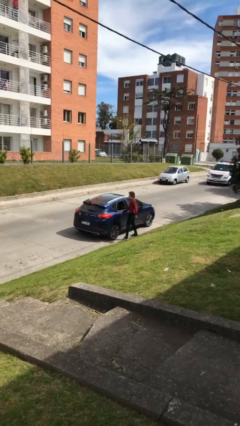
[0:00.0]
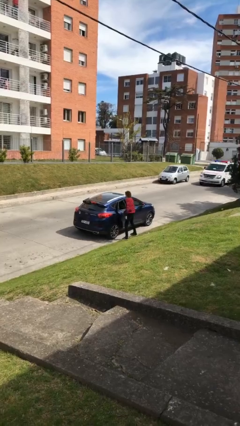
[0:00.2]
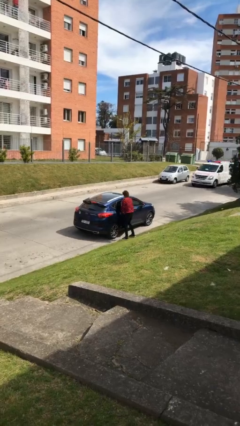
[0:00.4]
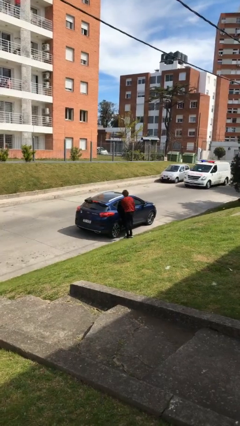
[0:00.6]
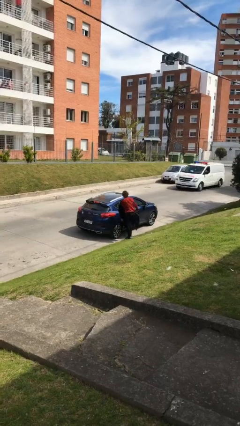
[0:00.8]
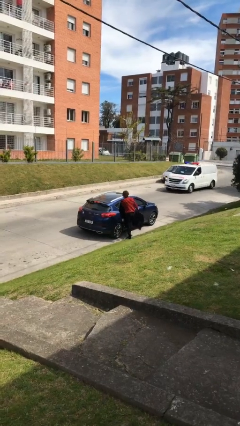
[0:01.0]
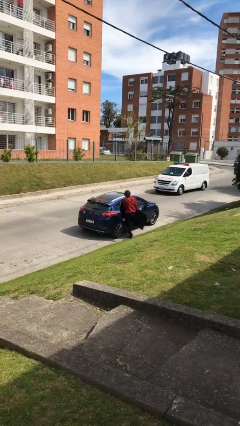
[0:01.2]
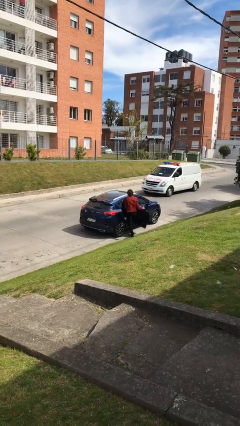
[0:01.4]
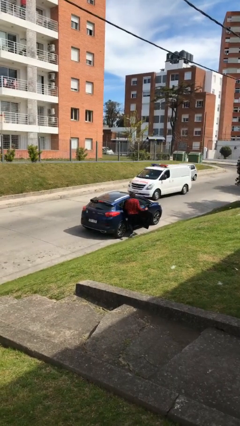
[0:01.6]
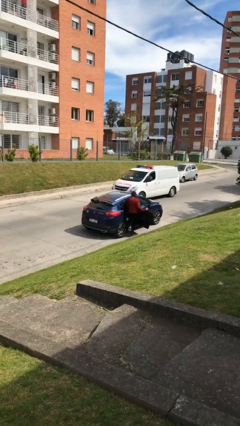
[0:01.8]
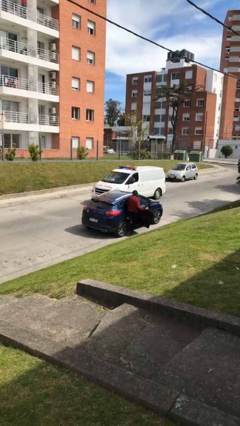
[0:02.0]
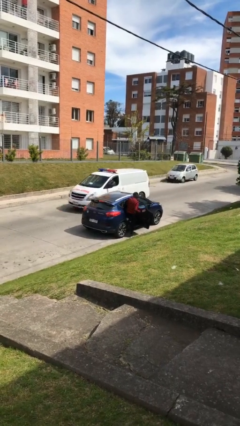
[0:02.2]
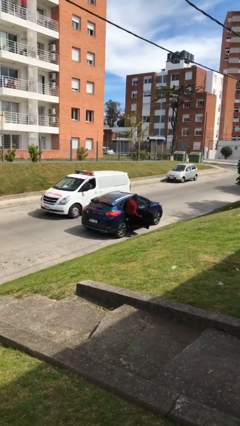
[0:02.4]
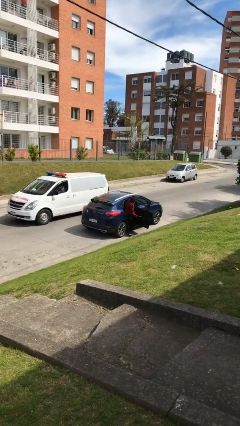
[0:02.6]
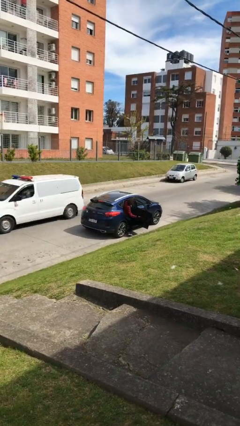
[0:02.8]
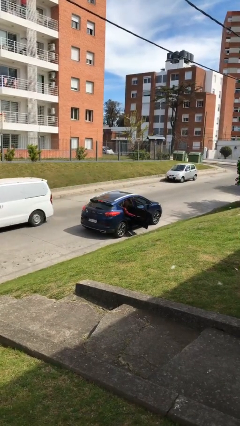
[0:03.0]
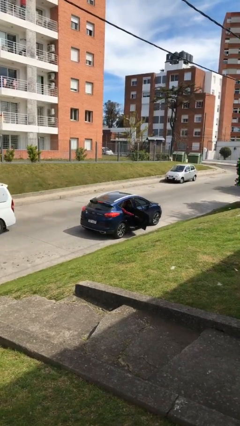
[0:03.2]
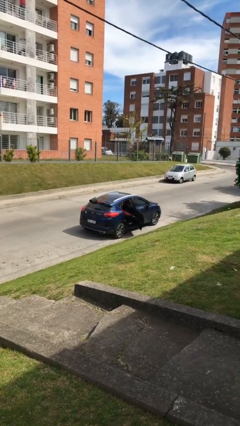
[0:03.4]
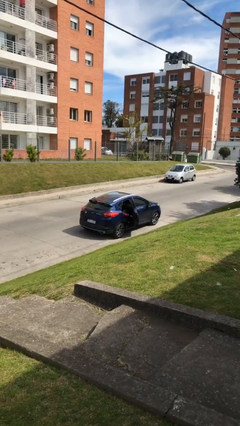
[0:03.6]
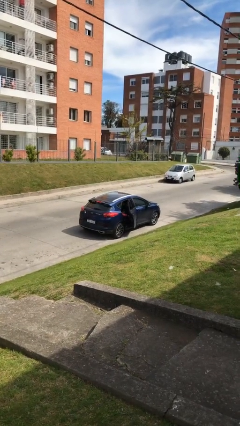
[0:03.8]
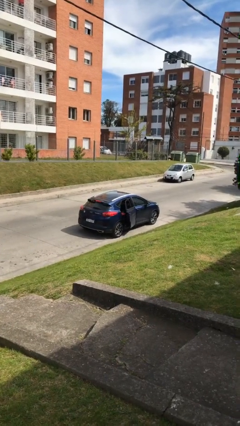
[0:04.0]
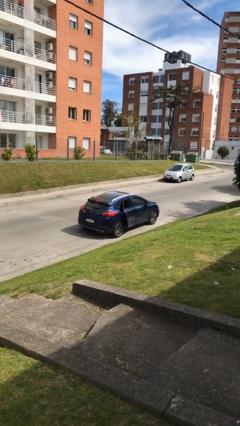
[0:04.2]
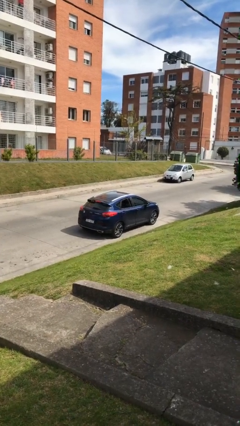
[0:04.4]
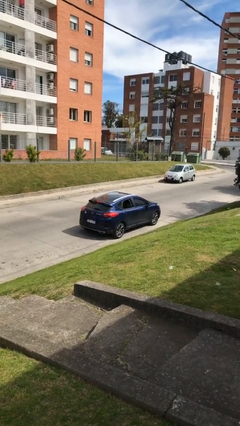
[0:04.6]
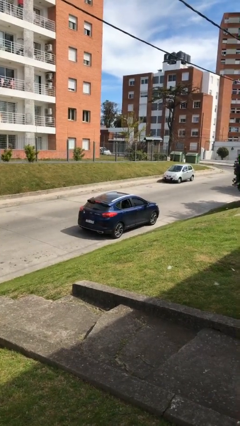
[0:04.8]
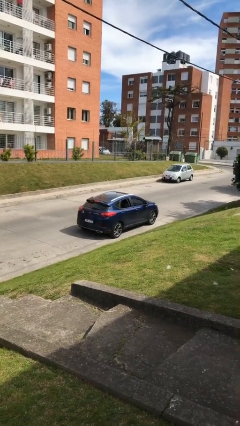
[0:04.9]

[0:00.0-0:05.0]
car picks up person

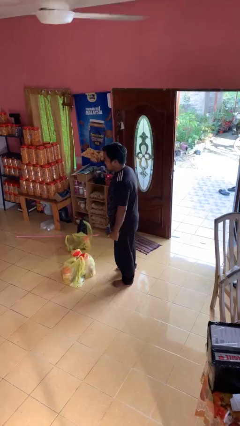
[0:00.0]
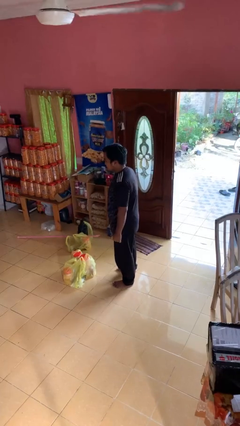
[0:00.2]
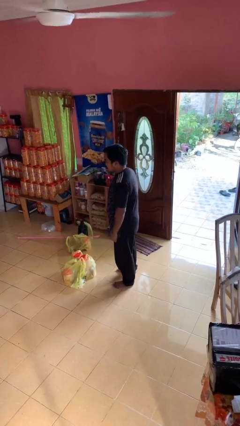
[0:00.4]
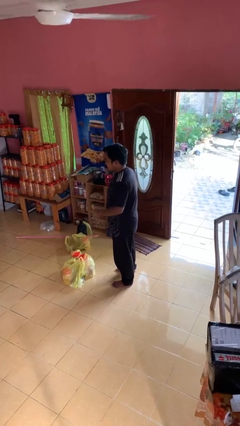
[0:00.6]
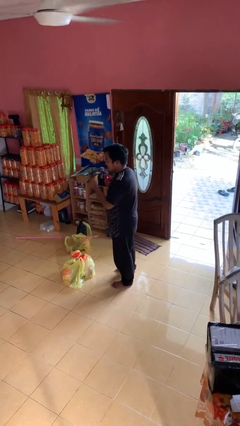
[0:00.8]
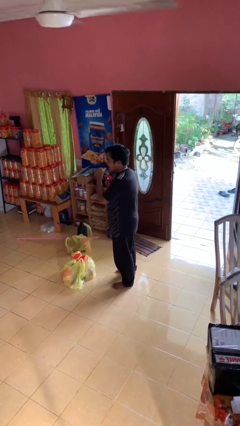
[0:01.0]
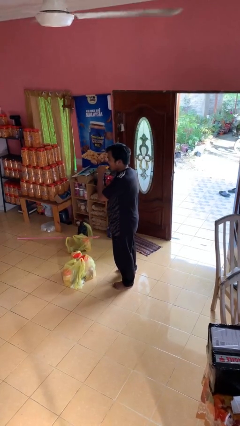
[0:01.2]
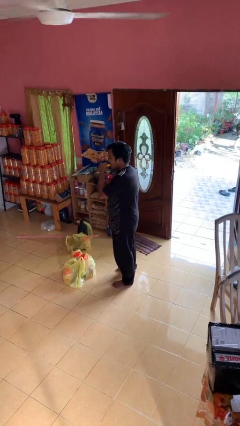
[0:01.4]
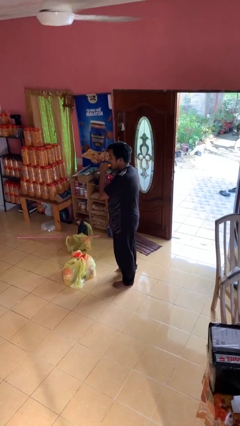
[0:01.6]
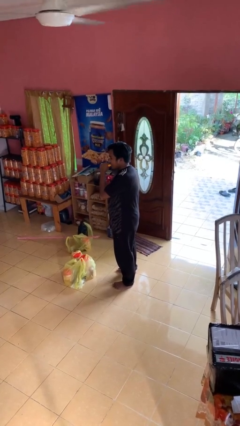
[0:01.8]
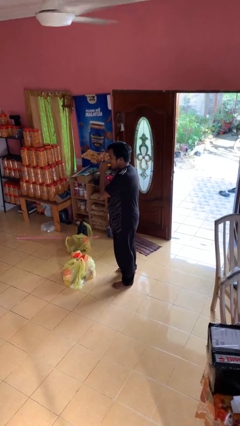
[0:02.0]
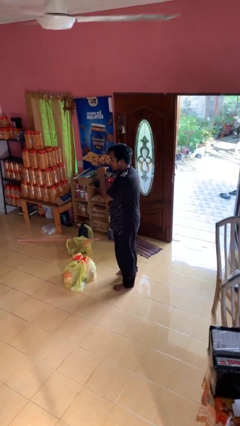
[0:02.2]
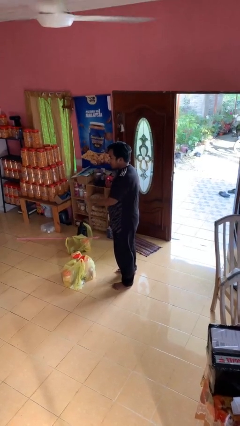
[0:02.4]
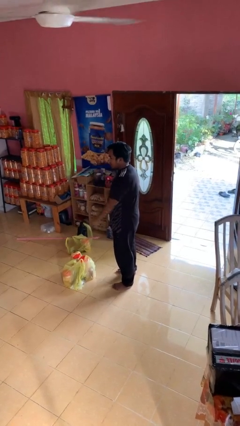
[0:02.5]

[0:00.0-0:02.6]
person eats banana

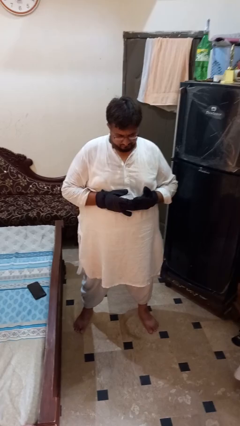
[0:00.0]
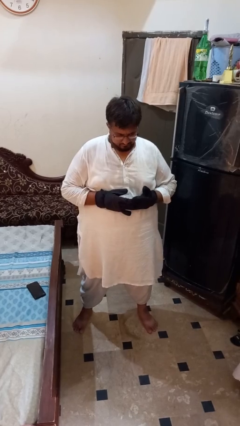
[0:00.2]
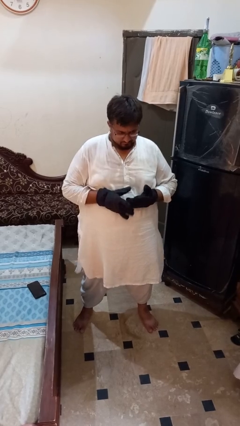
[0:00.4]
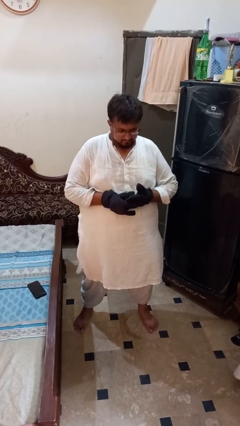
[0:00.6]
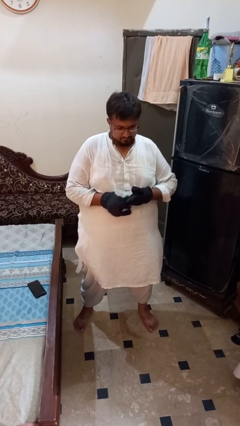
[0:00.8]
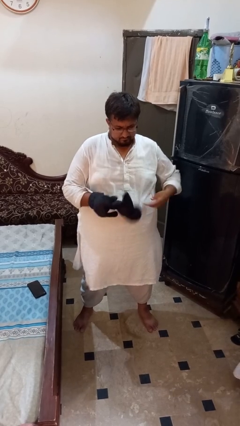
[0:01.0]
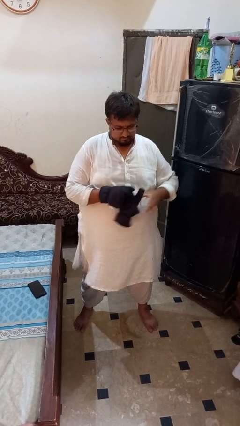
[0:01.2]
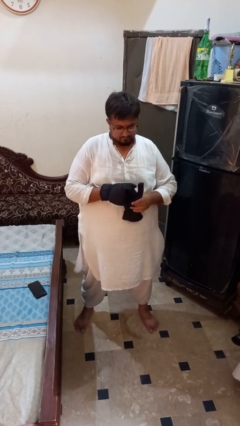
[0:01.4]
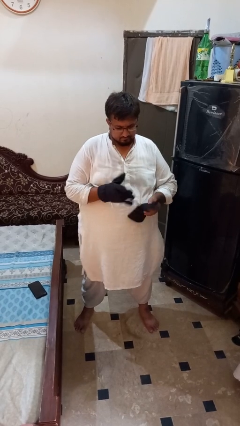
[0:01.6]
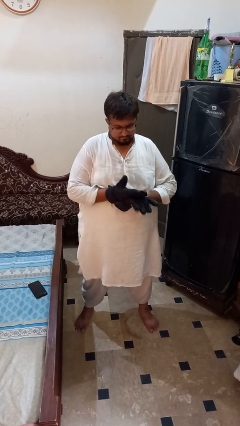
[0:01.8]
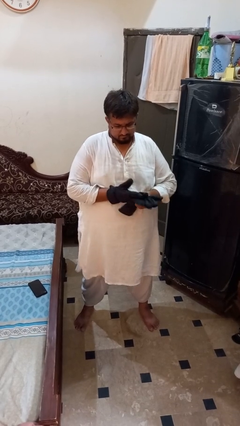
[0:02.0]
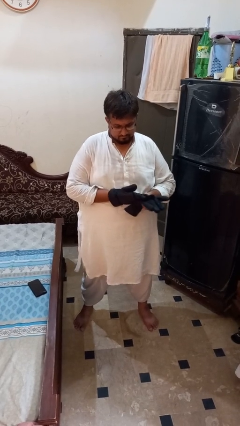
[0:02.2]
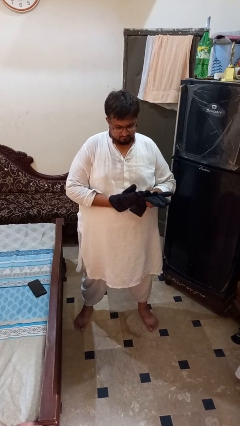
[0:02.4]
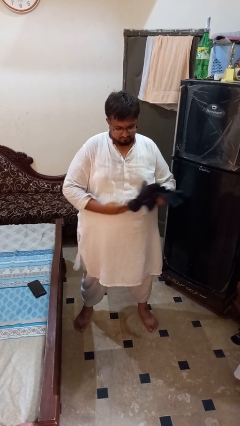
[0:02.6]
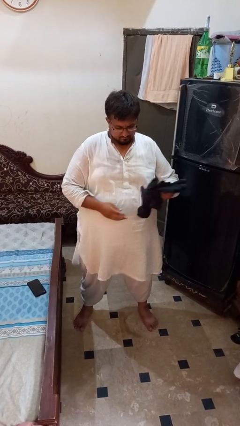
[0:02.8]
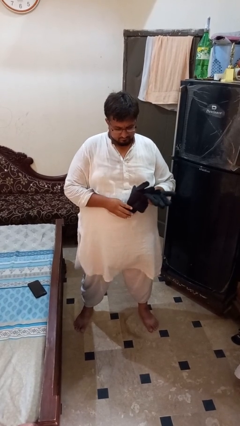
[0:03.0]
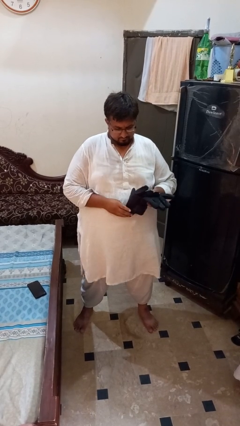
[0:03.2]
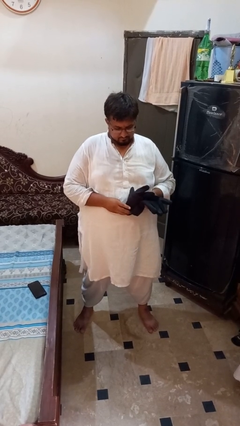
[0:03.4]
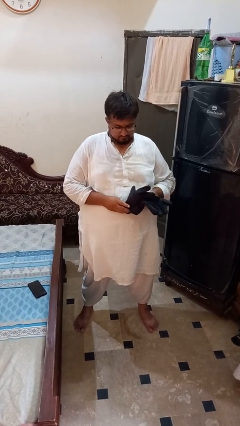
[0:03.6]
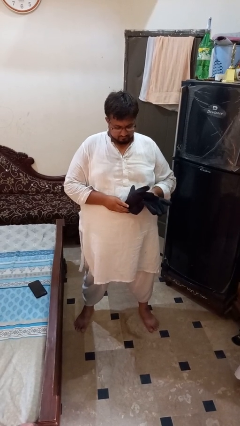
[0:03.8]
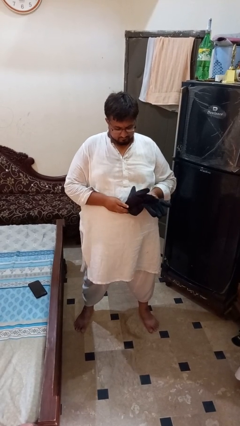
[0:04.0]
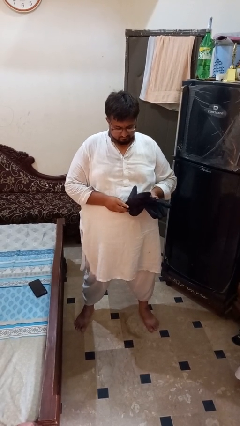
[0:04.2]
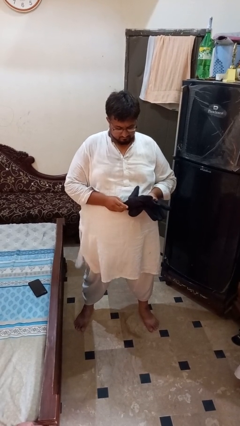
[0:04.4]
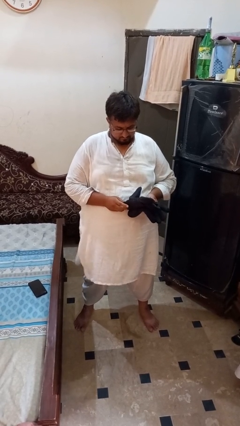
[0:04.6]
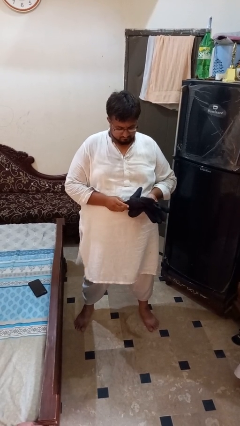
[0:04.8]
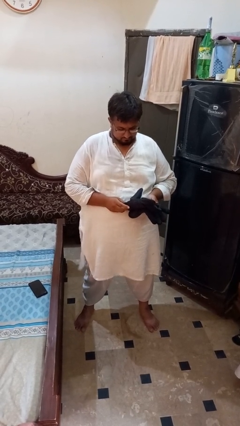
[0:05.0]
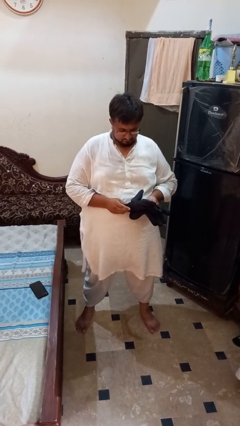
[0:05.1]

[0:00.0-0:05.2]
person takes off gloves

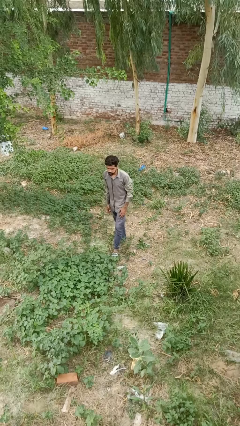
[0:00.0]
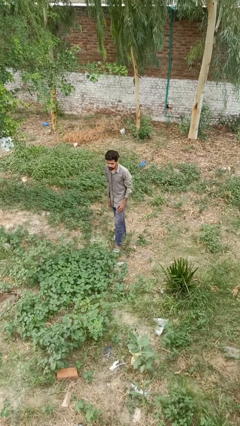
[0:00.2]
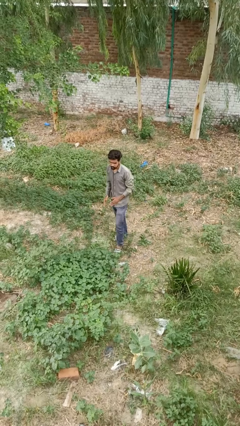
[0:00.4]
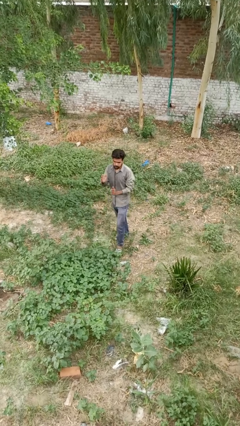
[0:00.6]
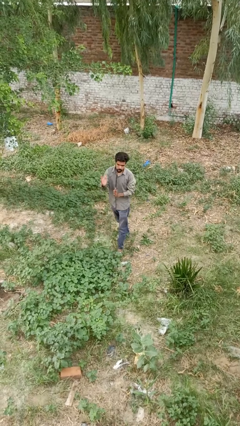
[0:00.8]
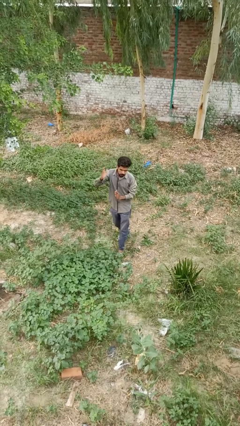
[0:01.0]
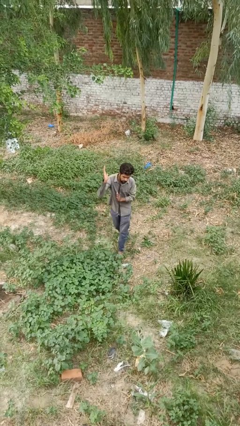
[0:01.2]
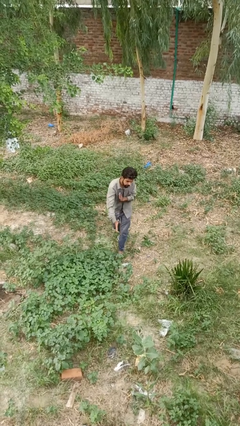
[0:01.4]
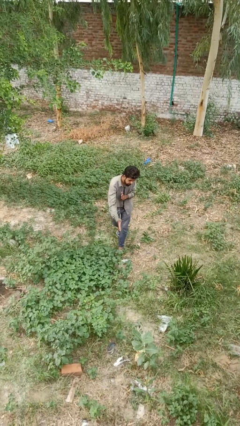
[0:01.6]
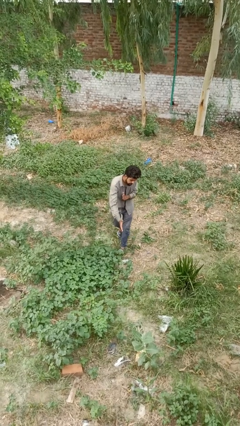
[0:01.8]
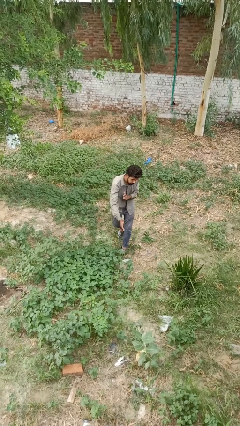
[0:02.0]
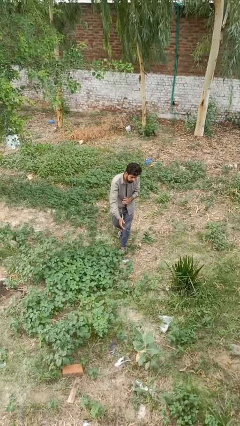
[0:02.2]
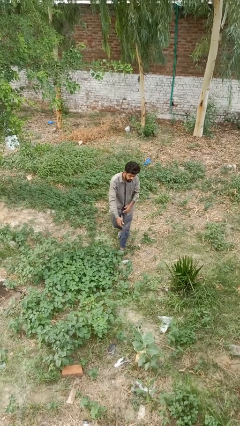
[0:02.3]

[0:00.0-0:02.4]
person karate chop

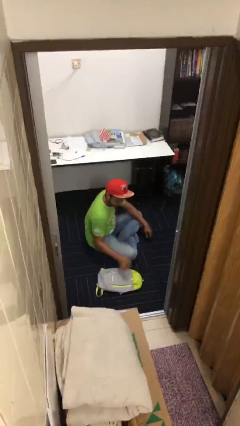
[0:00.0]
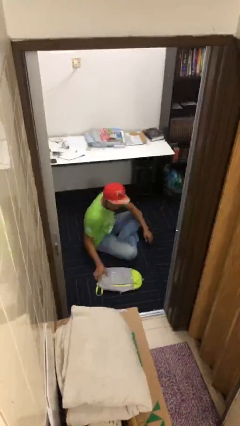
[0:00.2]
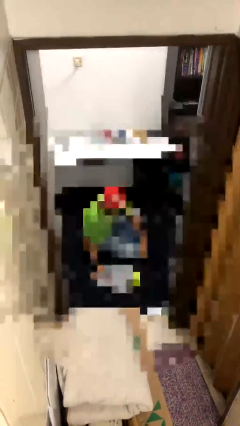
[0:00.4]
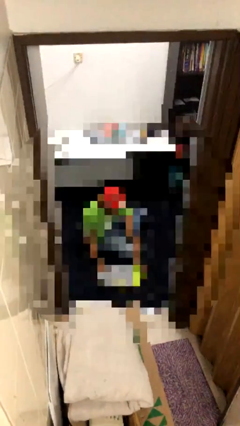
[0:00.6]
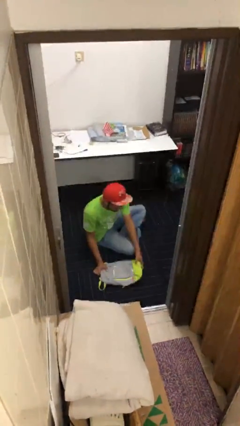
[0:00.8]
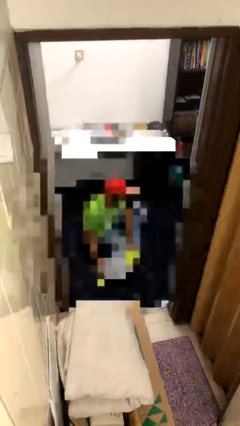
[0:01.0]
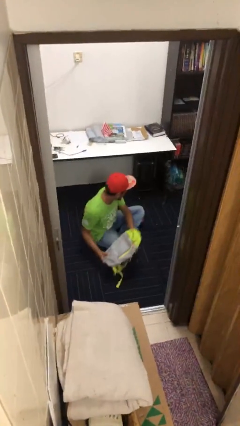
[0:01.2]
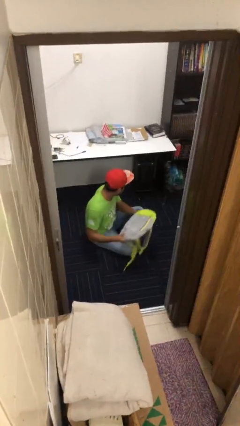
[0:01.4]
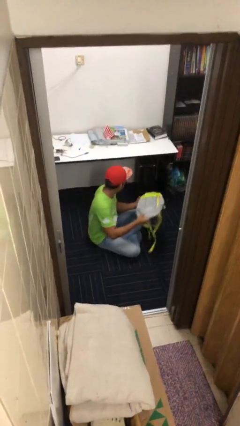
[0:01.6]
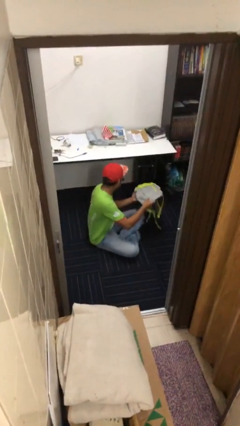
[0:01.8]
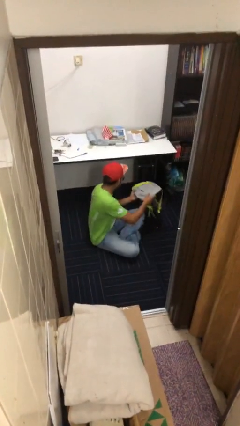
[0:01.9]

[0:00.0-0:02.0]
person picks up object from floor

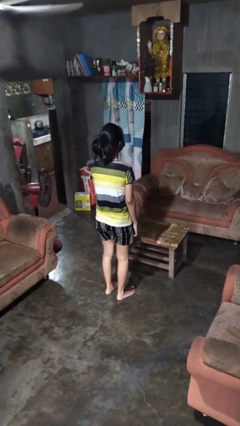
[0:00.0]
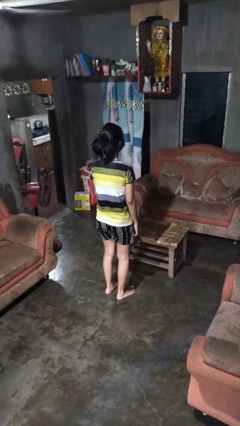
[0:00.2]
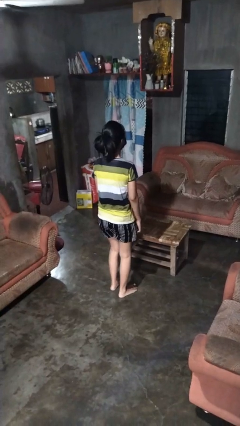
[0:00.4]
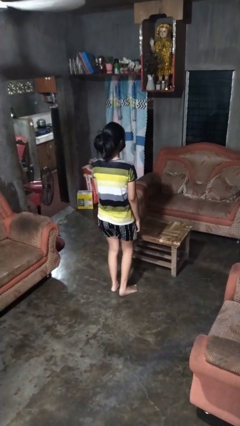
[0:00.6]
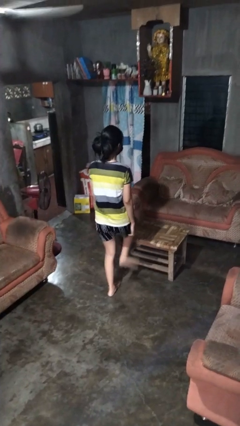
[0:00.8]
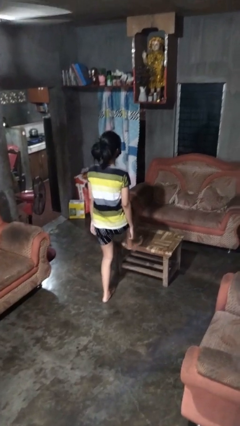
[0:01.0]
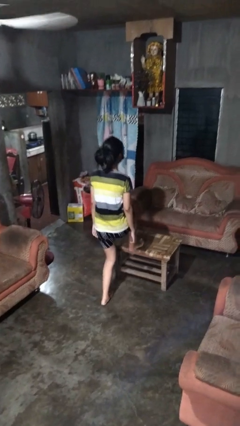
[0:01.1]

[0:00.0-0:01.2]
person climbs on table
